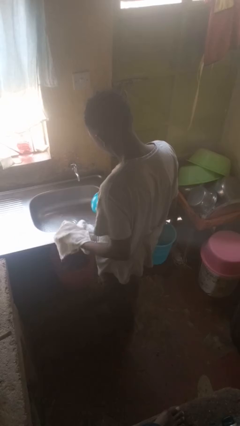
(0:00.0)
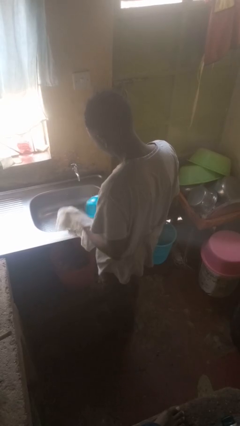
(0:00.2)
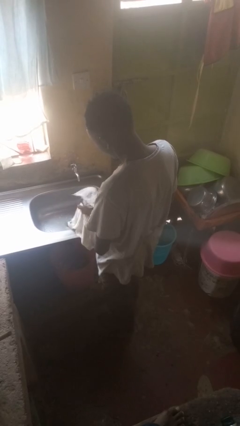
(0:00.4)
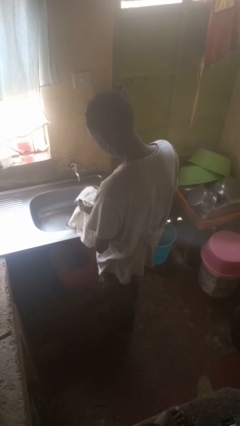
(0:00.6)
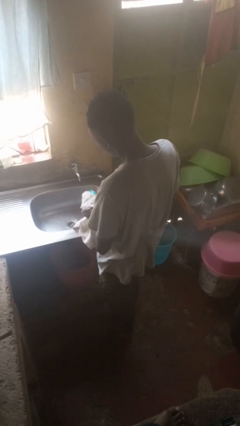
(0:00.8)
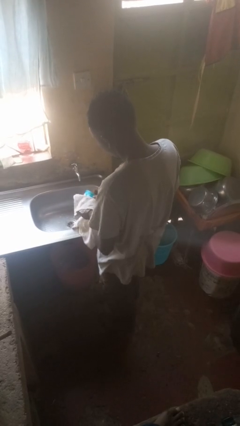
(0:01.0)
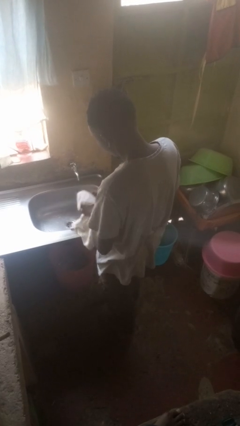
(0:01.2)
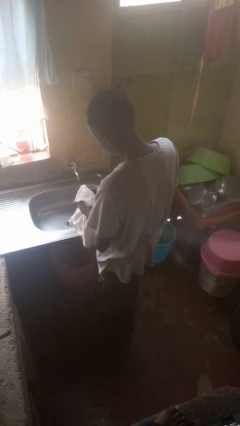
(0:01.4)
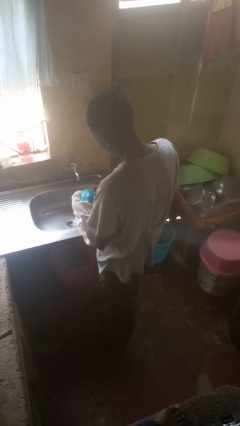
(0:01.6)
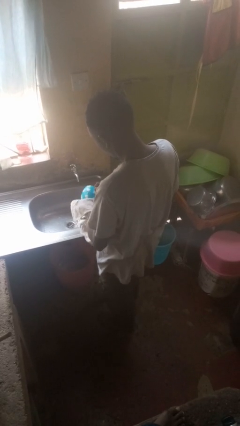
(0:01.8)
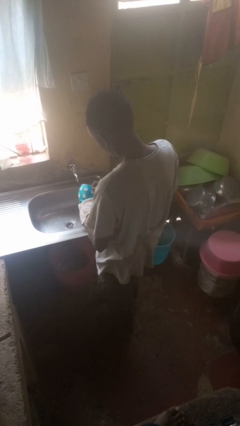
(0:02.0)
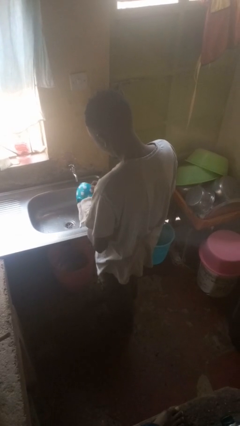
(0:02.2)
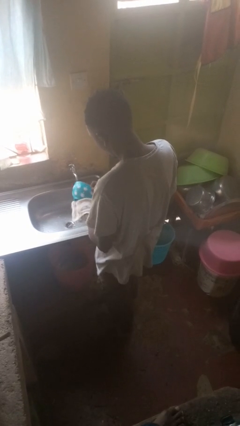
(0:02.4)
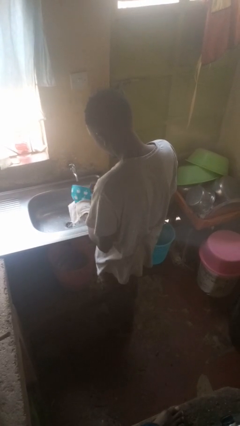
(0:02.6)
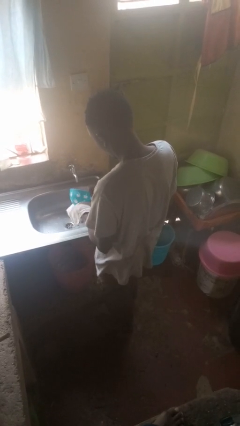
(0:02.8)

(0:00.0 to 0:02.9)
person dries dish

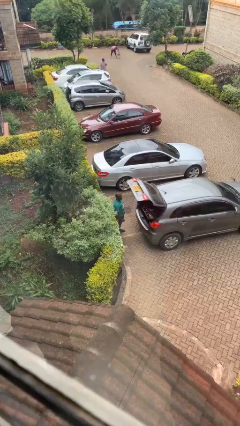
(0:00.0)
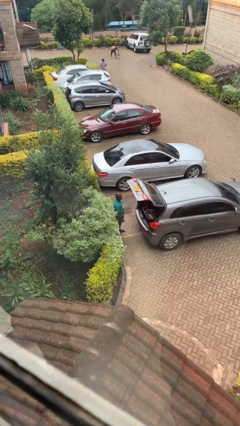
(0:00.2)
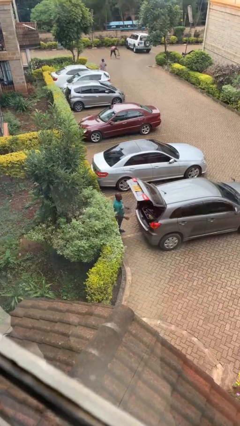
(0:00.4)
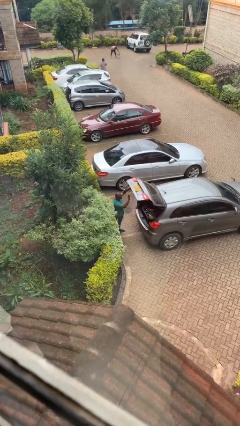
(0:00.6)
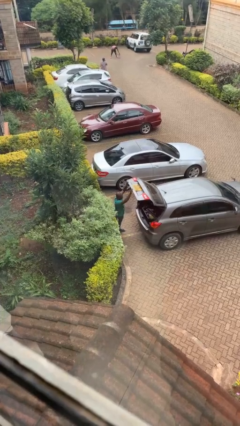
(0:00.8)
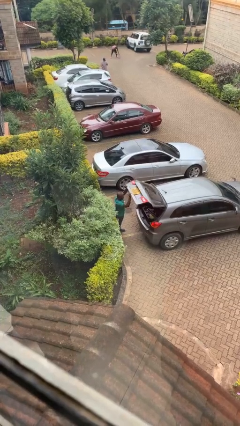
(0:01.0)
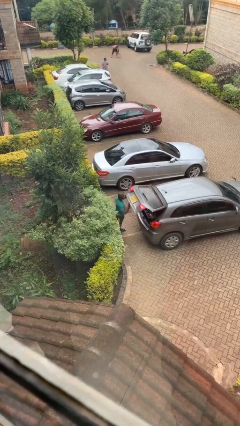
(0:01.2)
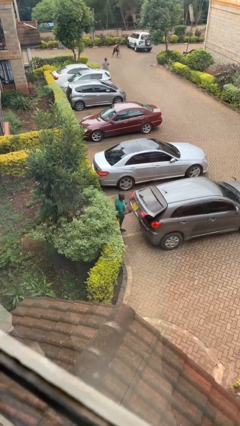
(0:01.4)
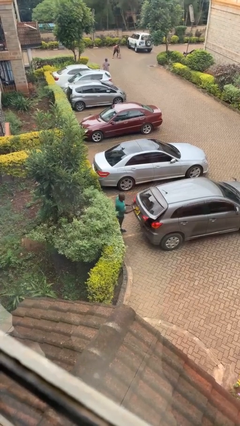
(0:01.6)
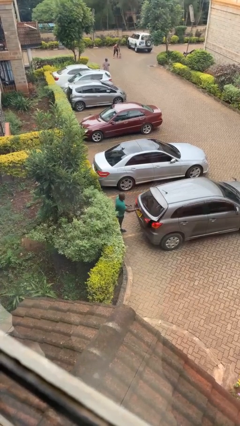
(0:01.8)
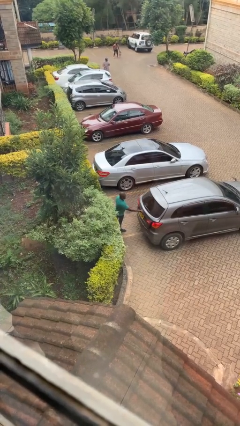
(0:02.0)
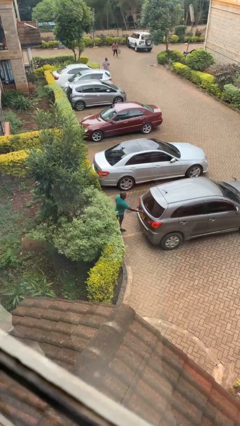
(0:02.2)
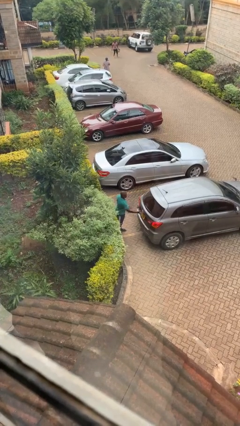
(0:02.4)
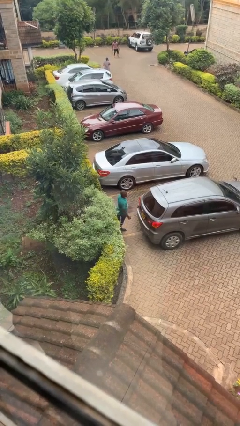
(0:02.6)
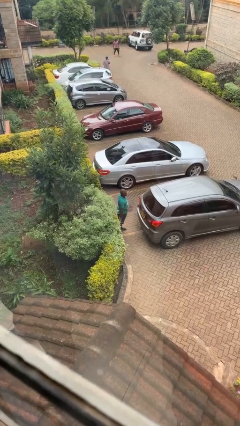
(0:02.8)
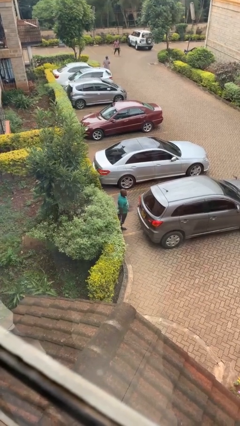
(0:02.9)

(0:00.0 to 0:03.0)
person closes car trunk

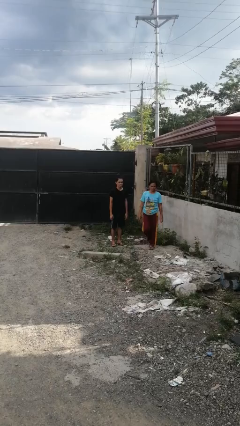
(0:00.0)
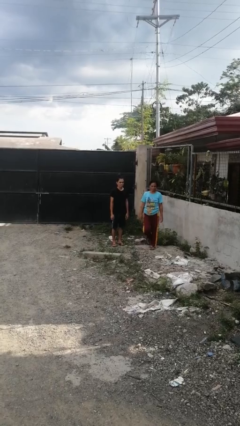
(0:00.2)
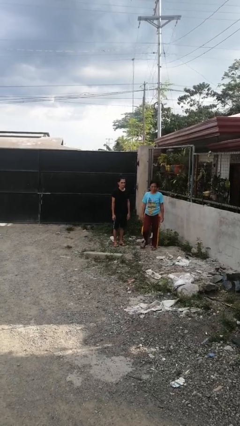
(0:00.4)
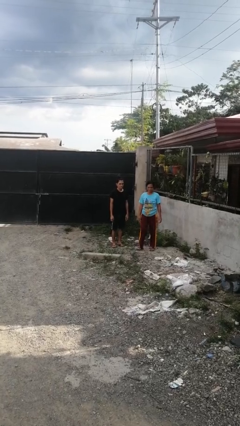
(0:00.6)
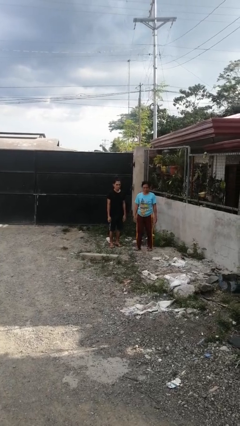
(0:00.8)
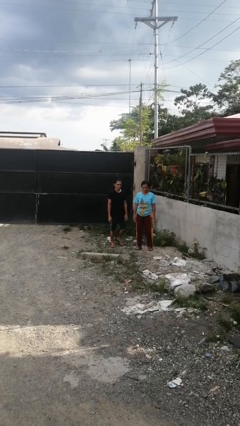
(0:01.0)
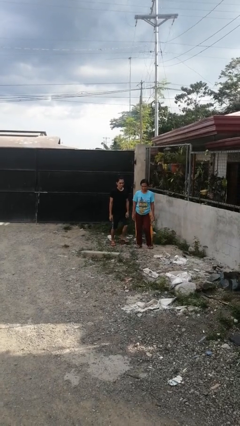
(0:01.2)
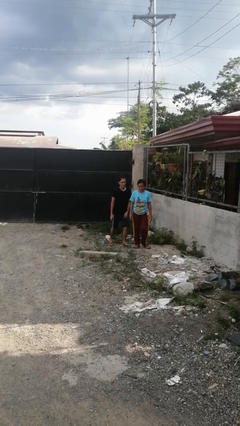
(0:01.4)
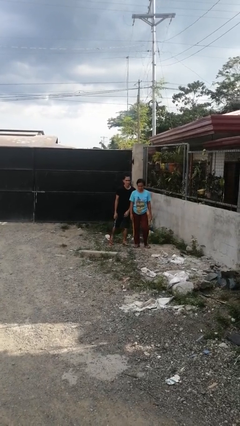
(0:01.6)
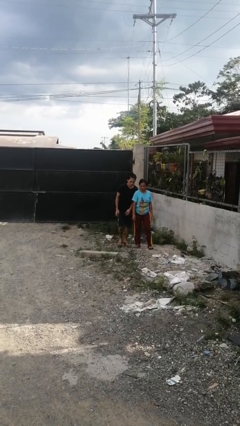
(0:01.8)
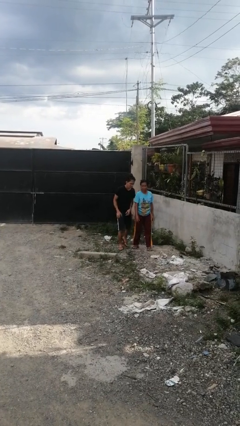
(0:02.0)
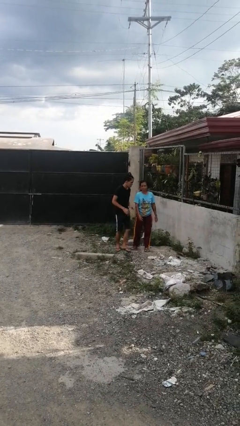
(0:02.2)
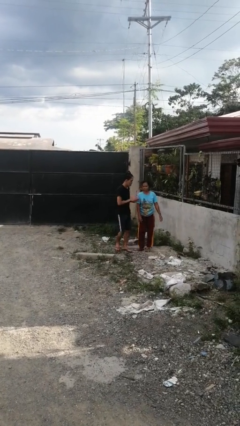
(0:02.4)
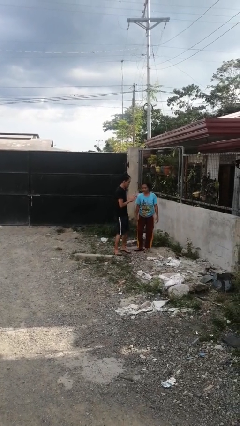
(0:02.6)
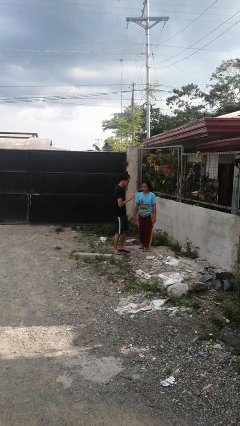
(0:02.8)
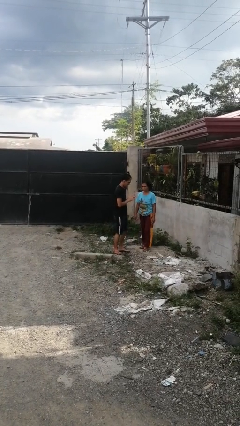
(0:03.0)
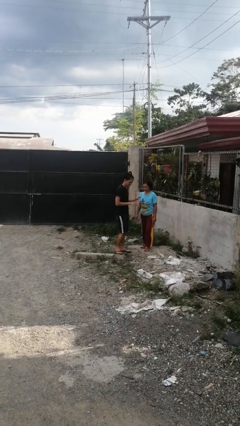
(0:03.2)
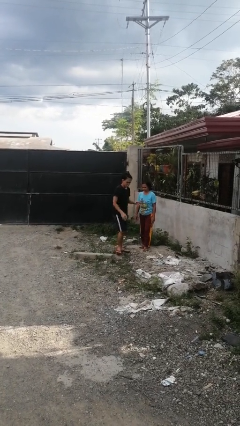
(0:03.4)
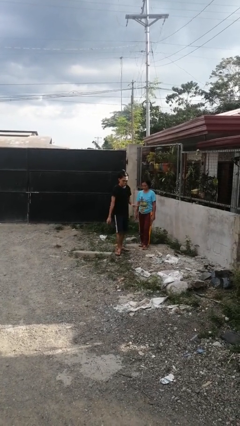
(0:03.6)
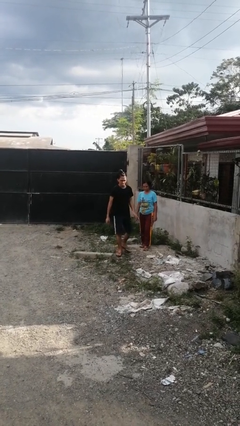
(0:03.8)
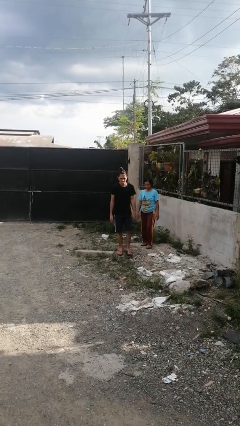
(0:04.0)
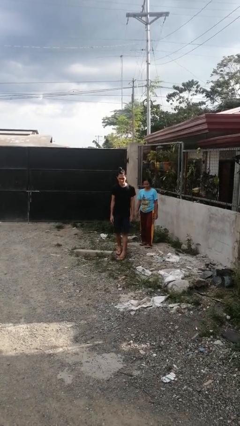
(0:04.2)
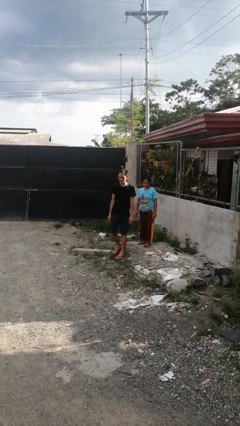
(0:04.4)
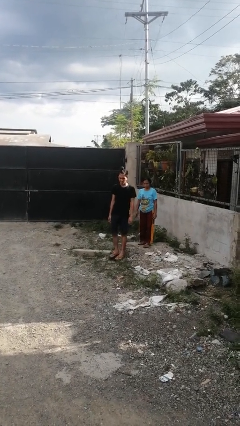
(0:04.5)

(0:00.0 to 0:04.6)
person bumps into person

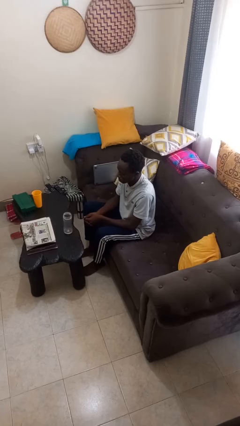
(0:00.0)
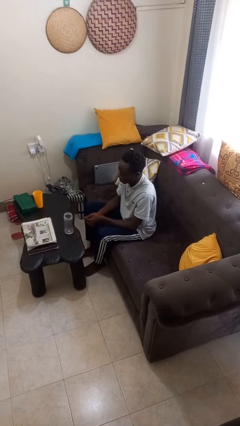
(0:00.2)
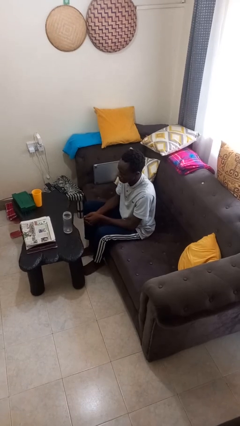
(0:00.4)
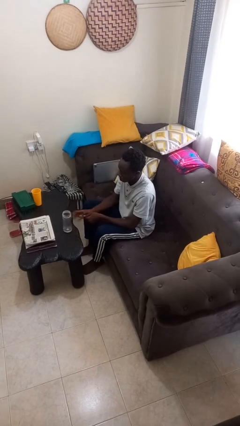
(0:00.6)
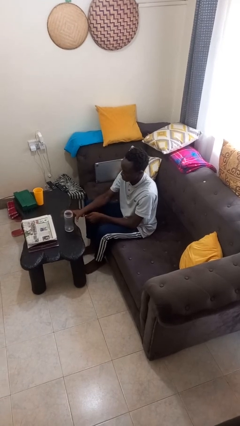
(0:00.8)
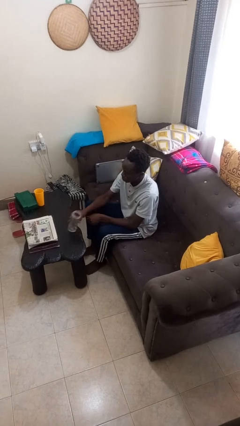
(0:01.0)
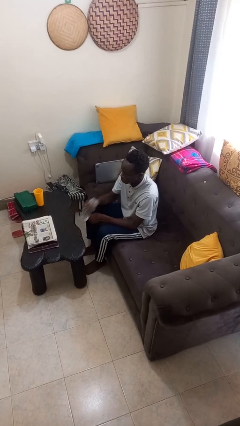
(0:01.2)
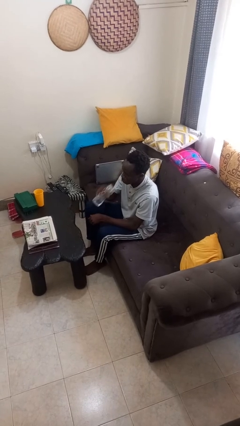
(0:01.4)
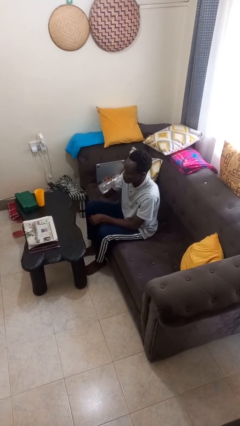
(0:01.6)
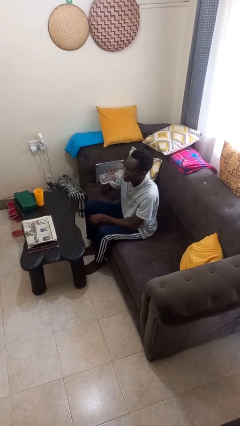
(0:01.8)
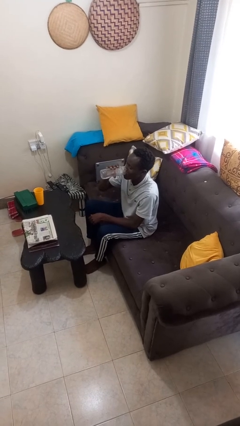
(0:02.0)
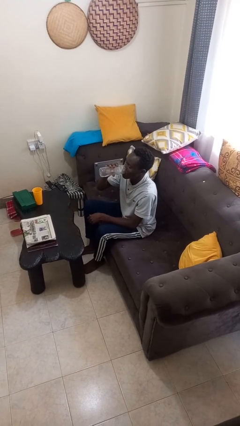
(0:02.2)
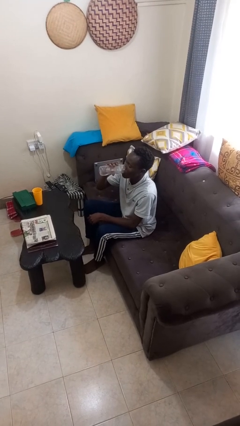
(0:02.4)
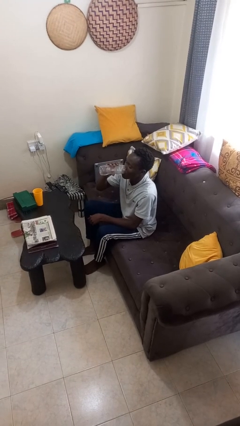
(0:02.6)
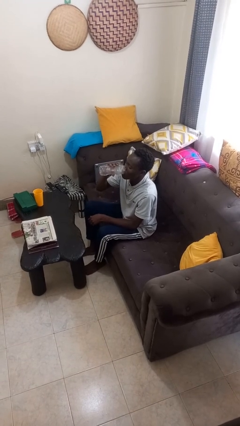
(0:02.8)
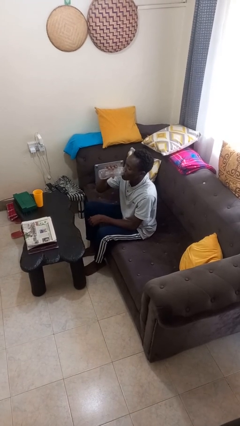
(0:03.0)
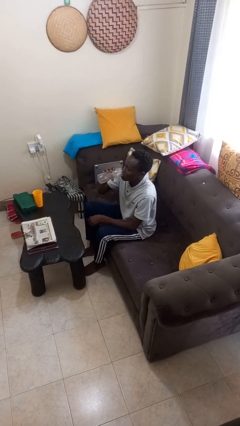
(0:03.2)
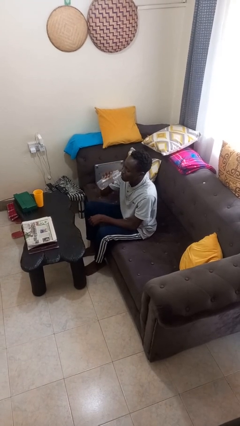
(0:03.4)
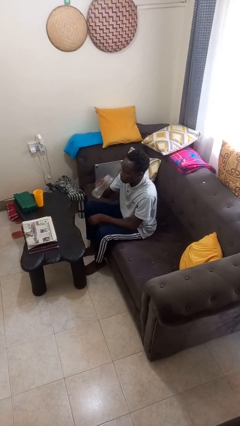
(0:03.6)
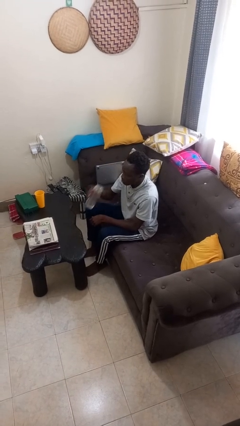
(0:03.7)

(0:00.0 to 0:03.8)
person drinks from bottle

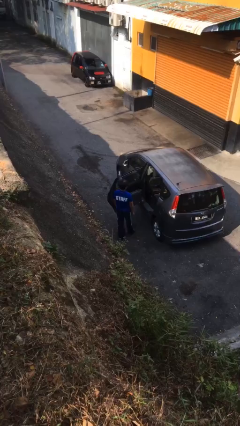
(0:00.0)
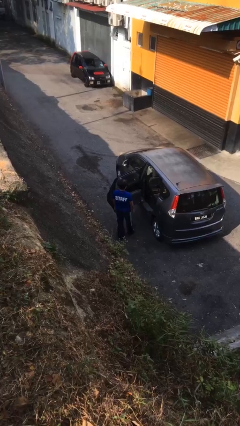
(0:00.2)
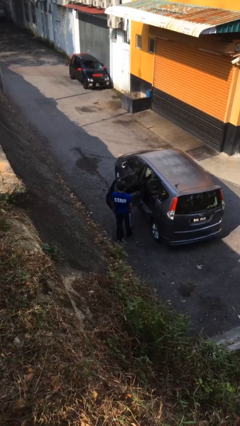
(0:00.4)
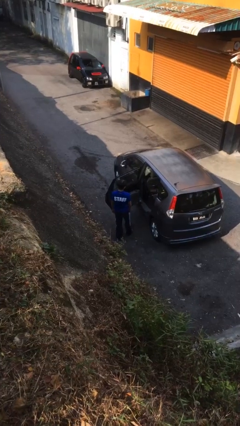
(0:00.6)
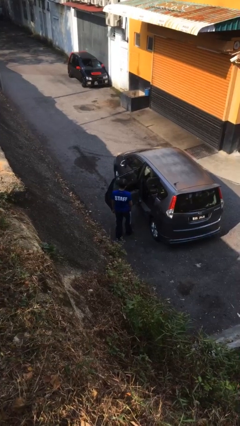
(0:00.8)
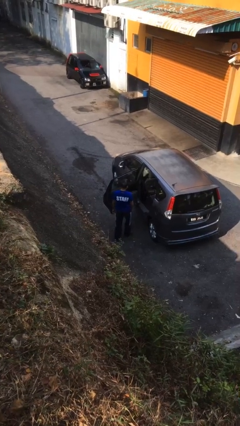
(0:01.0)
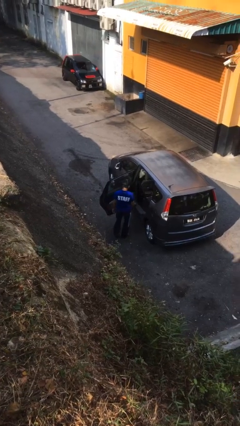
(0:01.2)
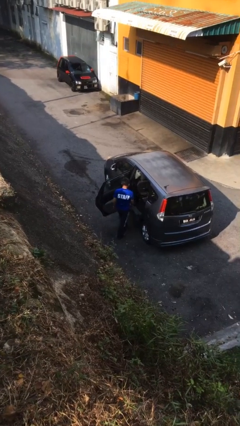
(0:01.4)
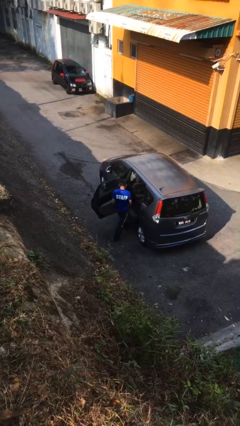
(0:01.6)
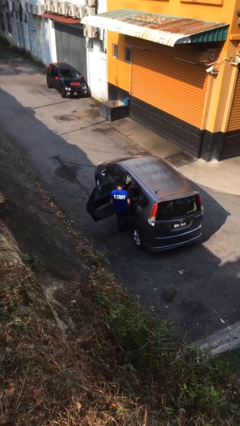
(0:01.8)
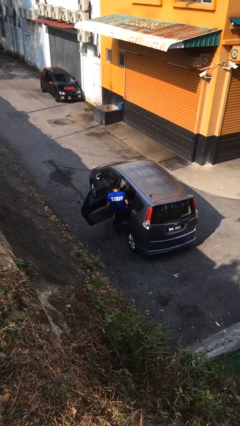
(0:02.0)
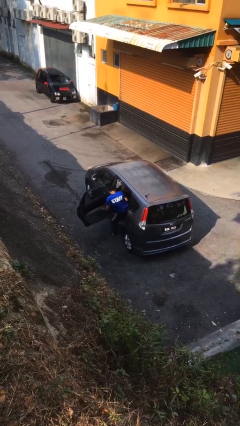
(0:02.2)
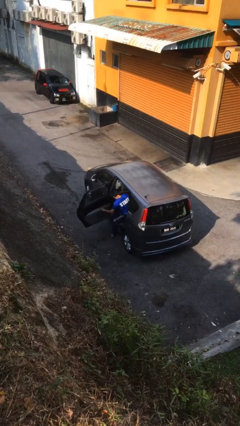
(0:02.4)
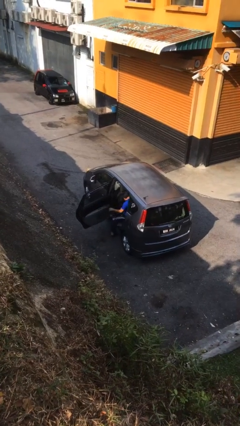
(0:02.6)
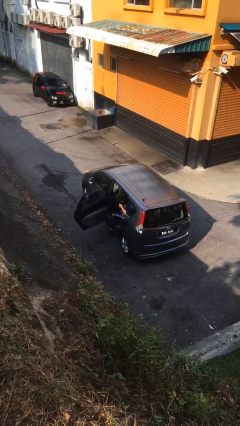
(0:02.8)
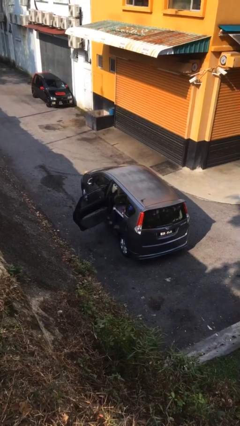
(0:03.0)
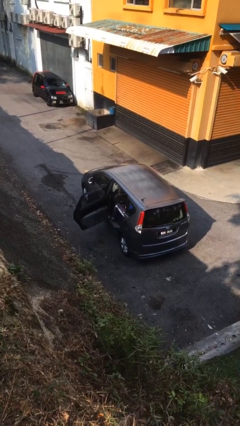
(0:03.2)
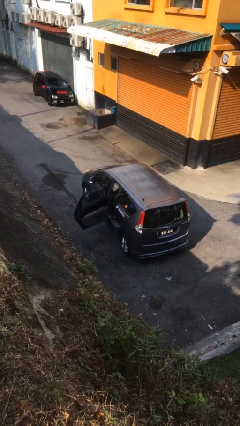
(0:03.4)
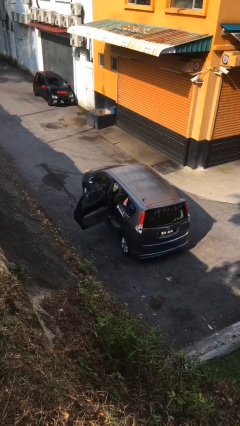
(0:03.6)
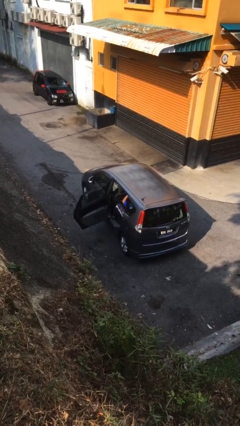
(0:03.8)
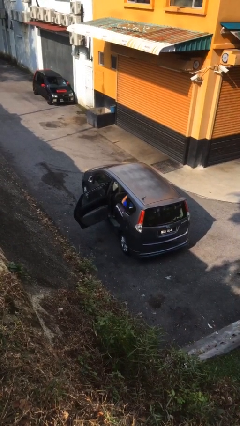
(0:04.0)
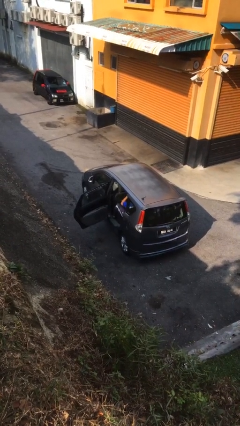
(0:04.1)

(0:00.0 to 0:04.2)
person enters car
